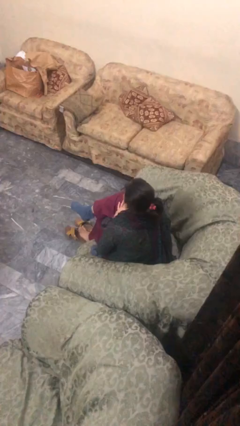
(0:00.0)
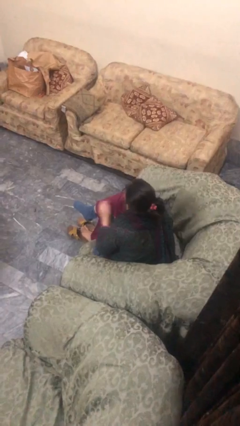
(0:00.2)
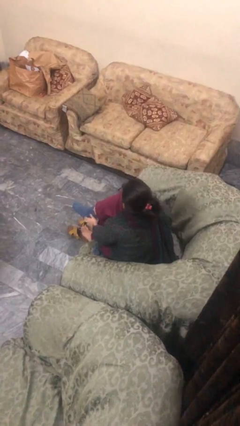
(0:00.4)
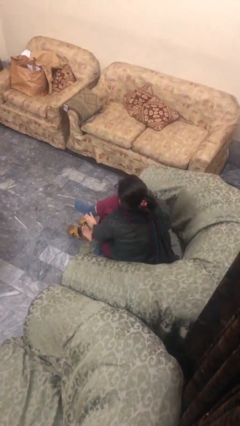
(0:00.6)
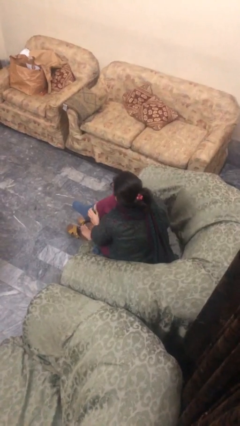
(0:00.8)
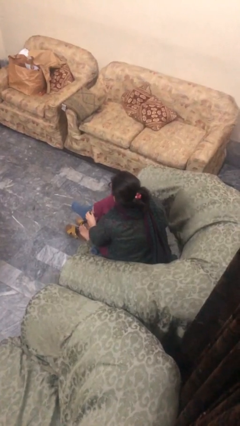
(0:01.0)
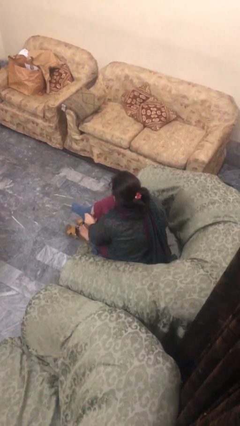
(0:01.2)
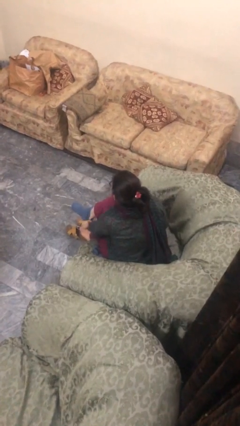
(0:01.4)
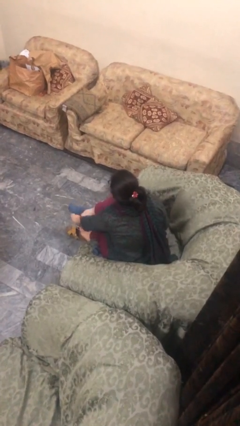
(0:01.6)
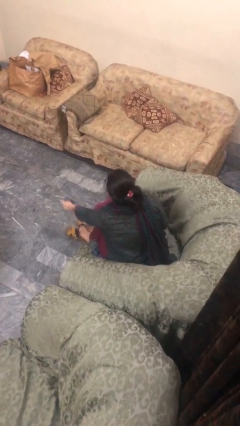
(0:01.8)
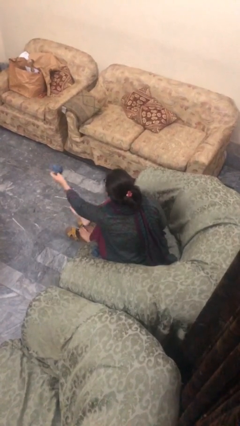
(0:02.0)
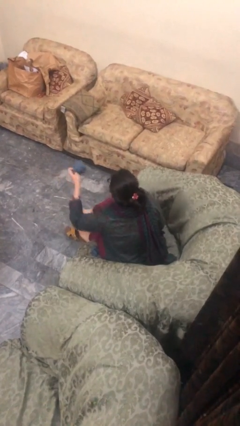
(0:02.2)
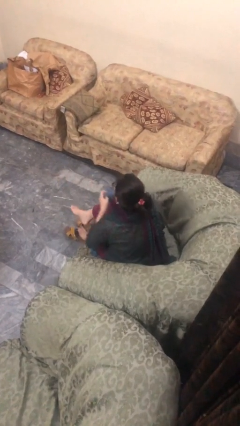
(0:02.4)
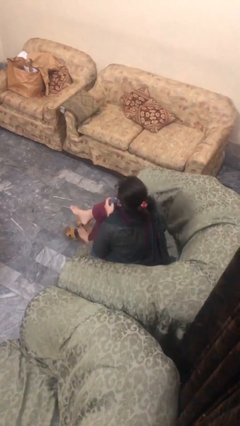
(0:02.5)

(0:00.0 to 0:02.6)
person takes off socks

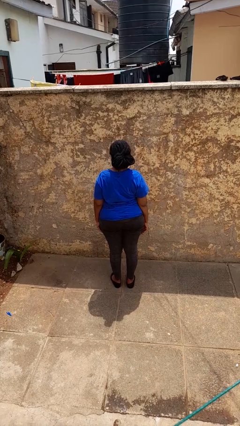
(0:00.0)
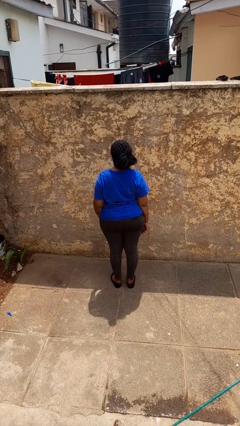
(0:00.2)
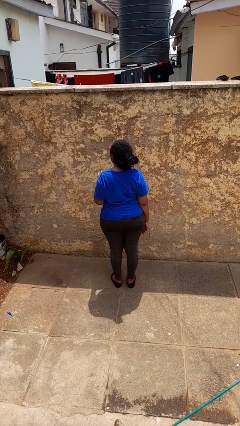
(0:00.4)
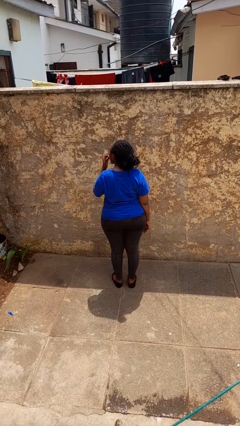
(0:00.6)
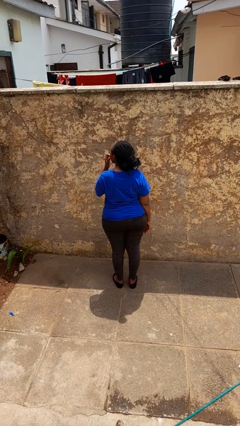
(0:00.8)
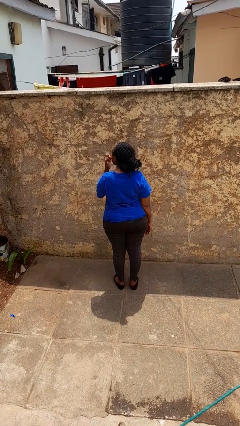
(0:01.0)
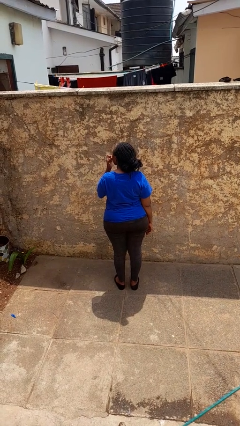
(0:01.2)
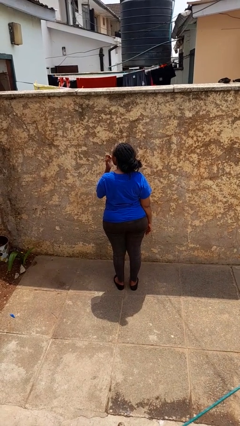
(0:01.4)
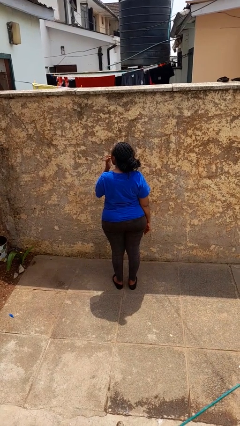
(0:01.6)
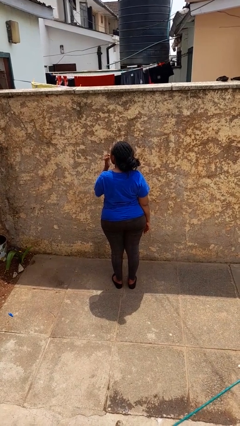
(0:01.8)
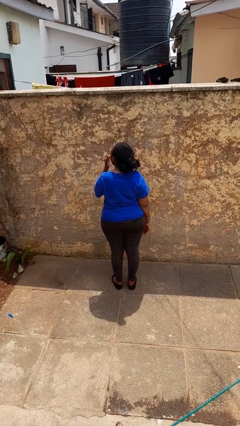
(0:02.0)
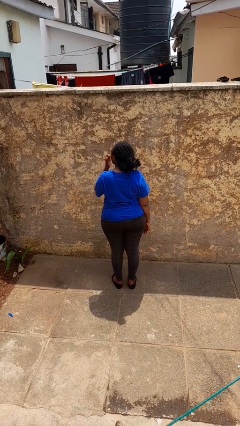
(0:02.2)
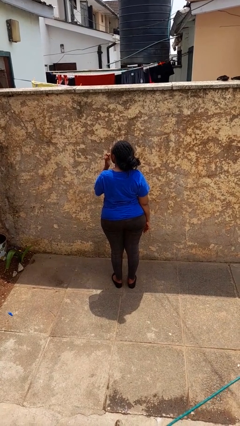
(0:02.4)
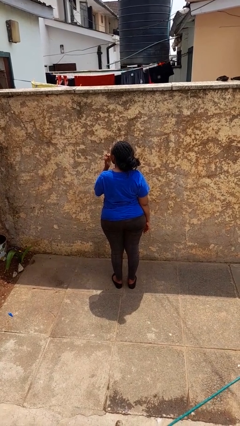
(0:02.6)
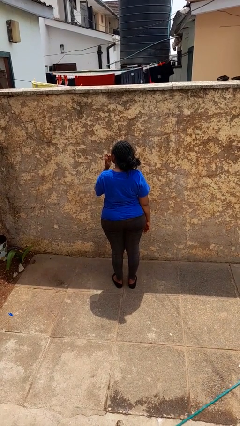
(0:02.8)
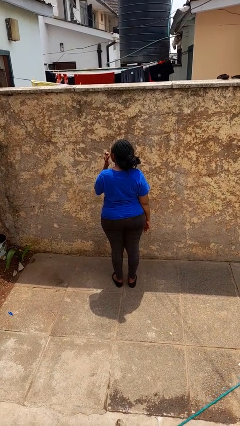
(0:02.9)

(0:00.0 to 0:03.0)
person licks fingers

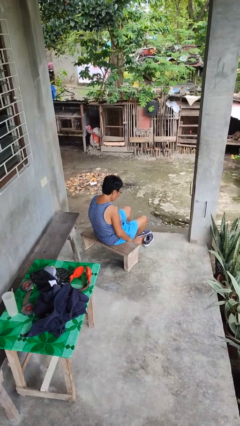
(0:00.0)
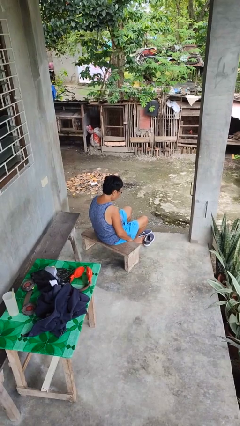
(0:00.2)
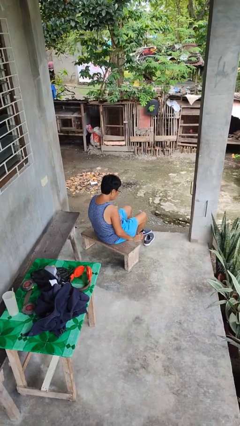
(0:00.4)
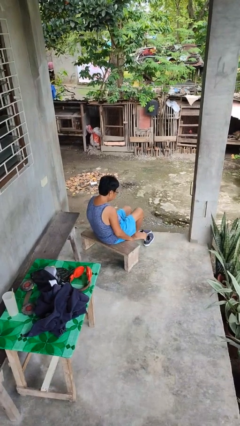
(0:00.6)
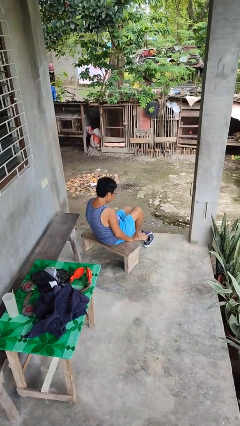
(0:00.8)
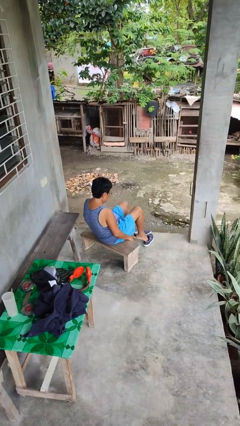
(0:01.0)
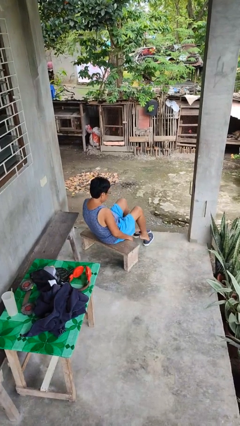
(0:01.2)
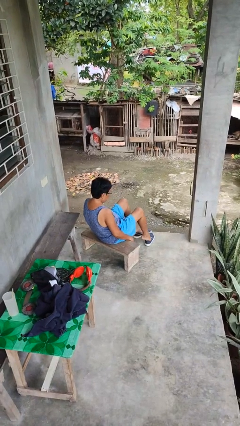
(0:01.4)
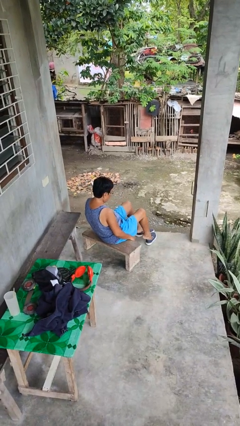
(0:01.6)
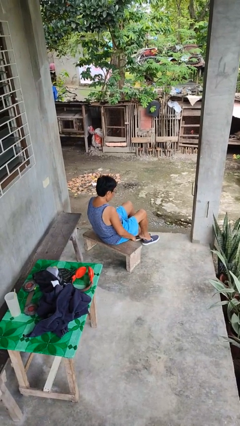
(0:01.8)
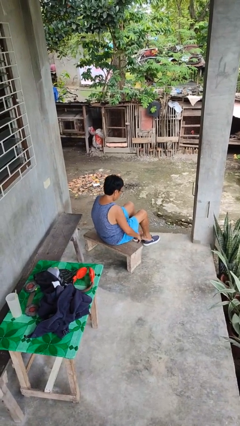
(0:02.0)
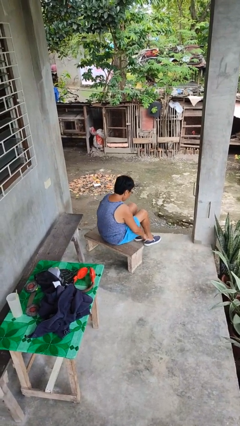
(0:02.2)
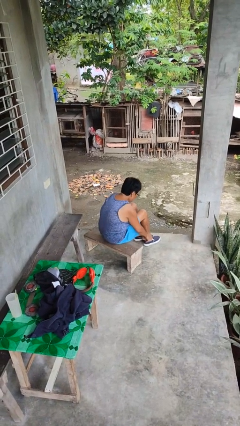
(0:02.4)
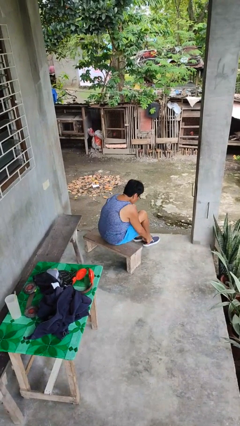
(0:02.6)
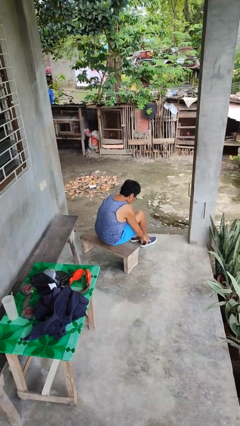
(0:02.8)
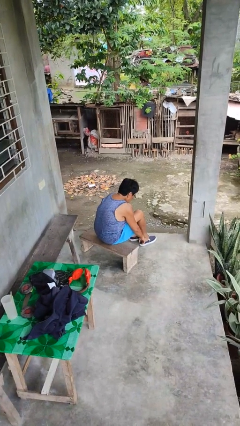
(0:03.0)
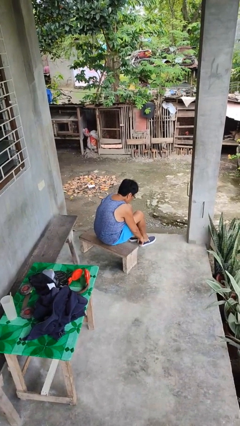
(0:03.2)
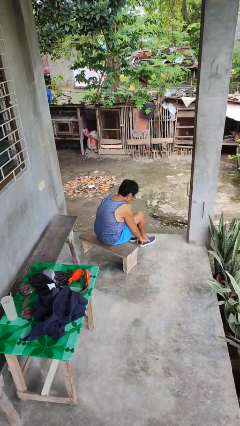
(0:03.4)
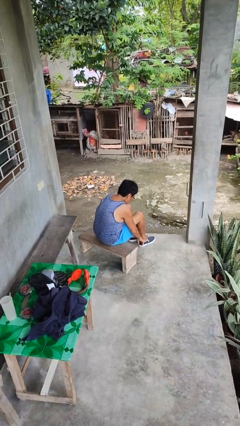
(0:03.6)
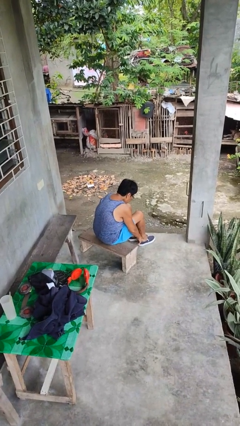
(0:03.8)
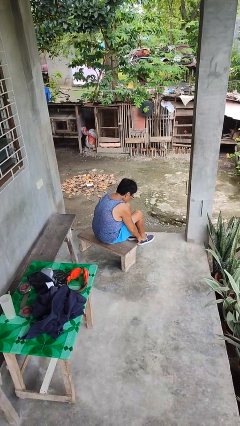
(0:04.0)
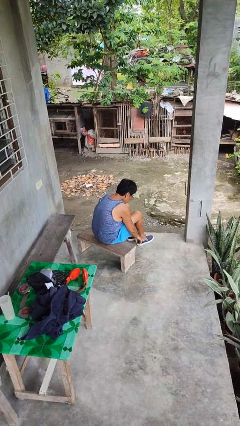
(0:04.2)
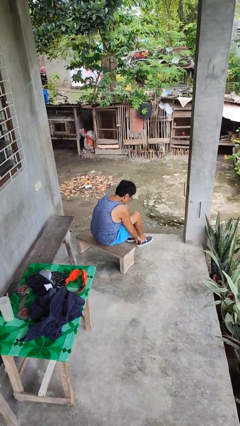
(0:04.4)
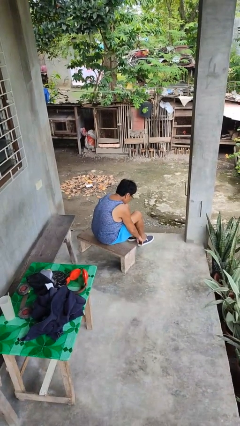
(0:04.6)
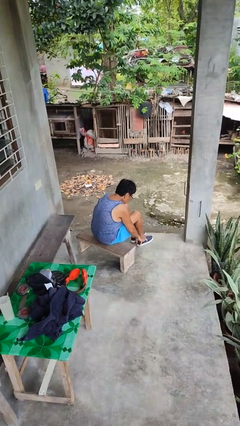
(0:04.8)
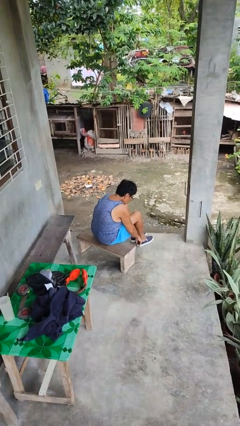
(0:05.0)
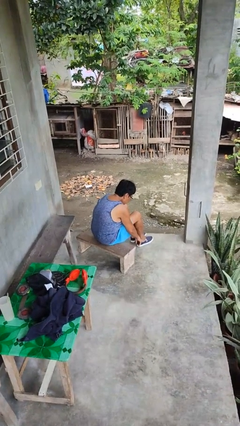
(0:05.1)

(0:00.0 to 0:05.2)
person puts on shoes

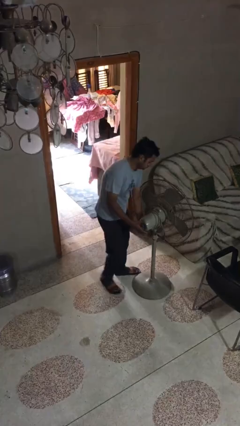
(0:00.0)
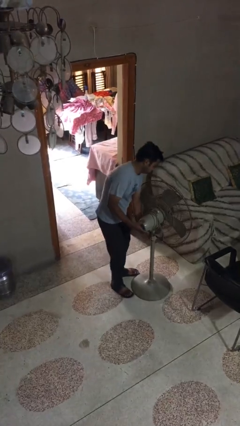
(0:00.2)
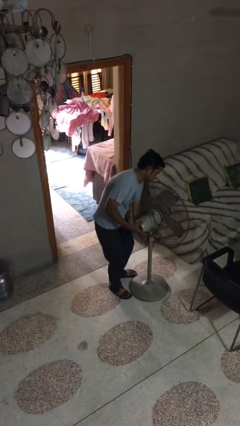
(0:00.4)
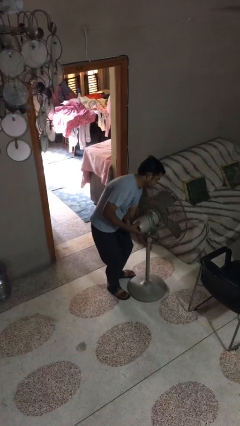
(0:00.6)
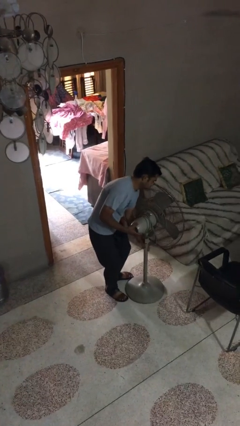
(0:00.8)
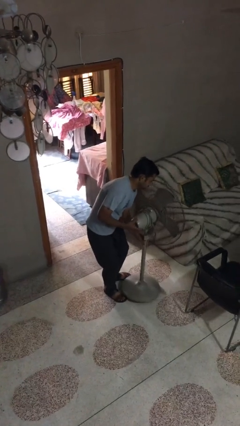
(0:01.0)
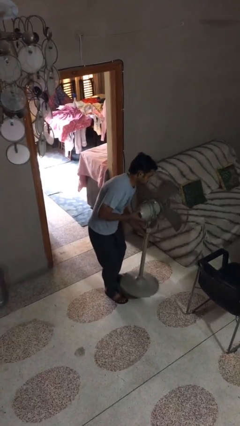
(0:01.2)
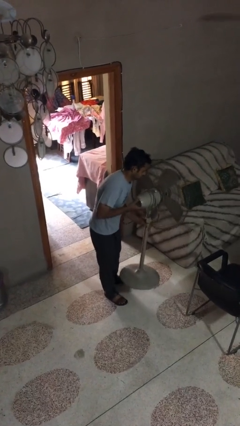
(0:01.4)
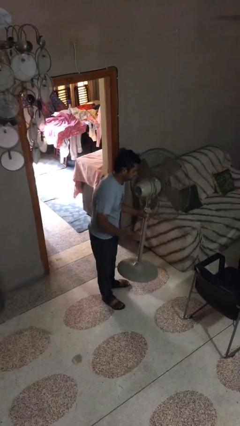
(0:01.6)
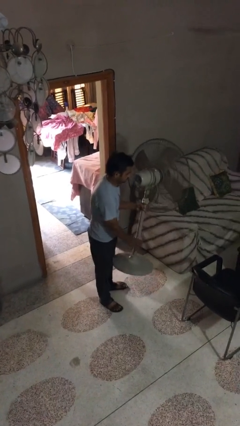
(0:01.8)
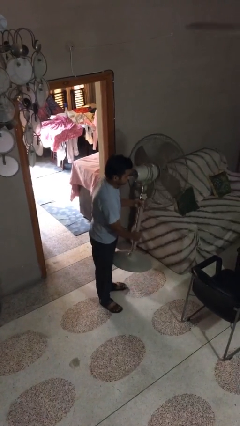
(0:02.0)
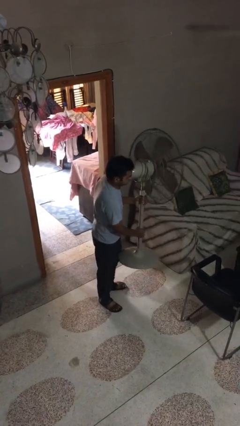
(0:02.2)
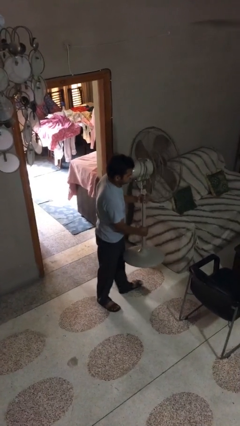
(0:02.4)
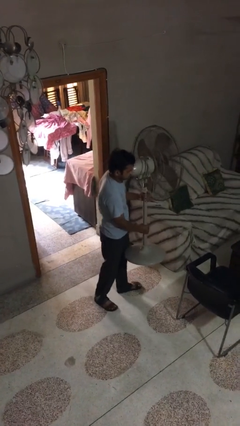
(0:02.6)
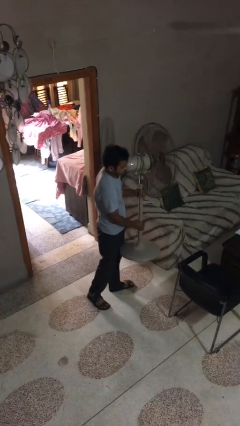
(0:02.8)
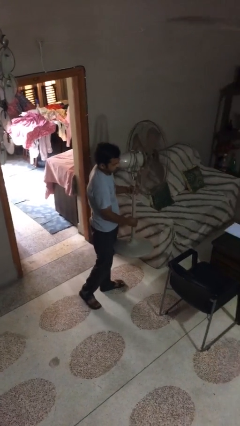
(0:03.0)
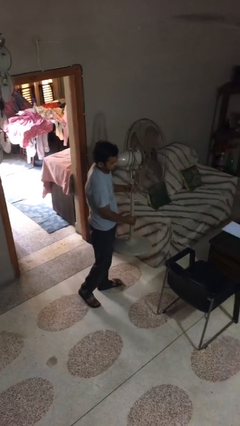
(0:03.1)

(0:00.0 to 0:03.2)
person picks up object from floor

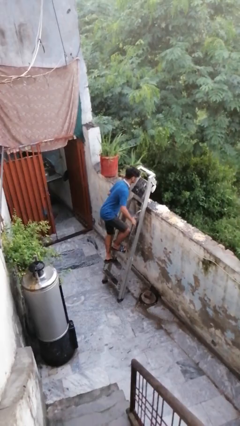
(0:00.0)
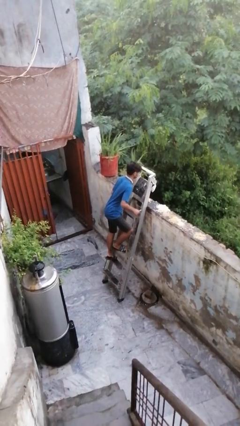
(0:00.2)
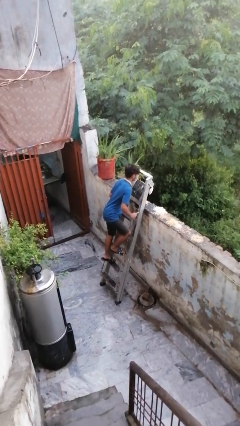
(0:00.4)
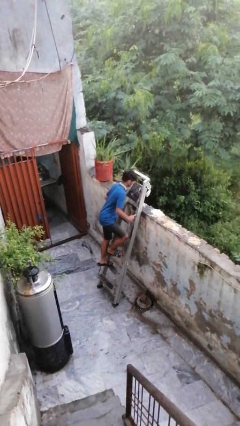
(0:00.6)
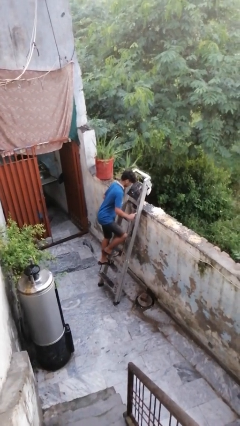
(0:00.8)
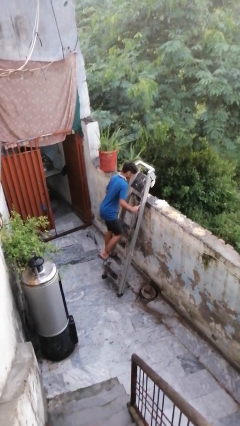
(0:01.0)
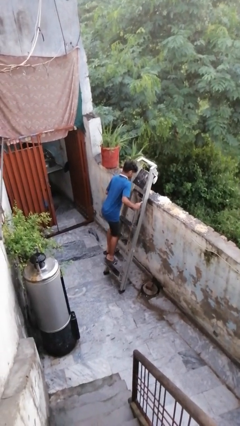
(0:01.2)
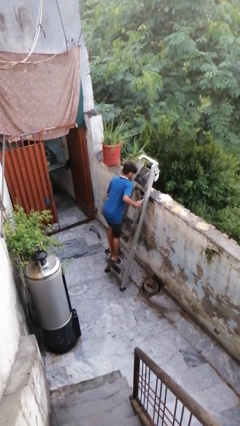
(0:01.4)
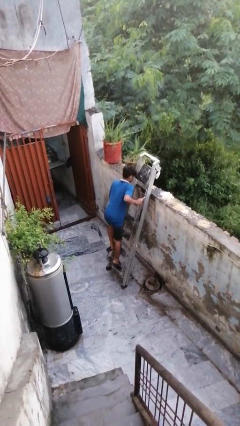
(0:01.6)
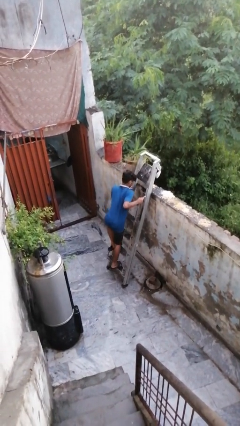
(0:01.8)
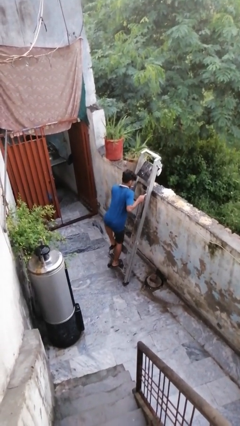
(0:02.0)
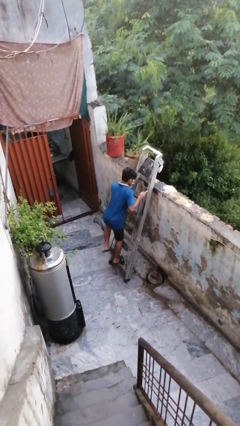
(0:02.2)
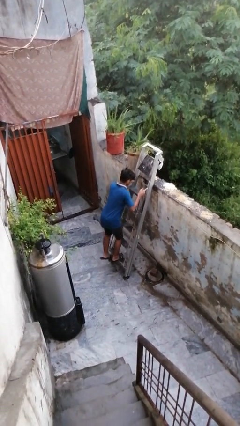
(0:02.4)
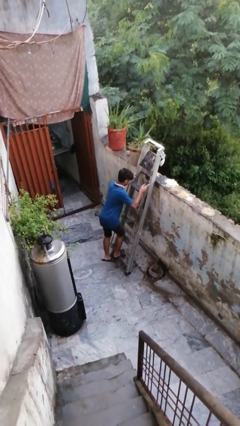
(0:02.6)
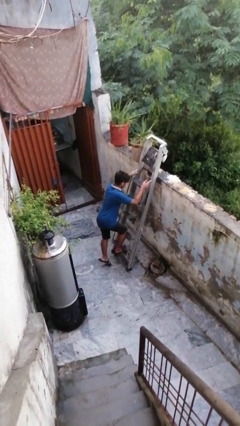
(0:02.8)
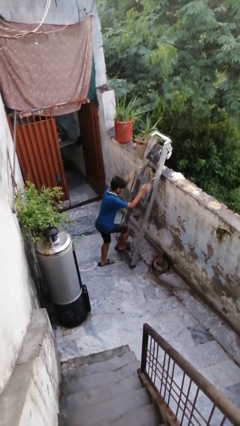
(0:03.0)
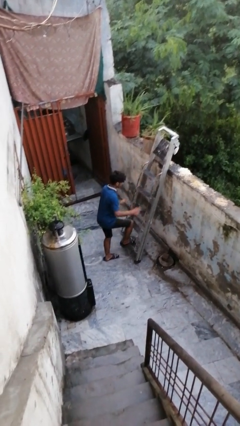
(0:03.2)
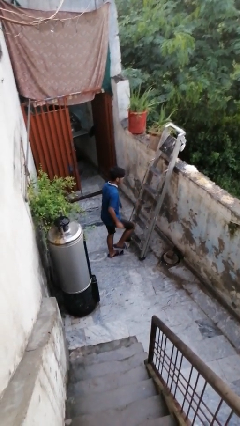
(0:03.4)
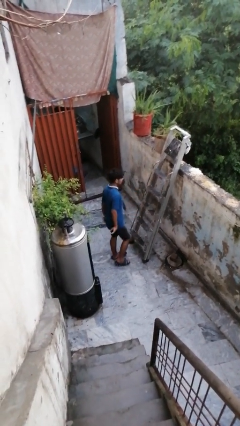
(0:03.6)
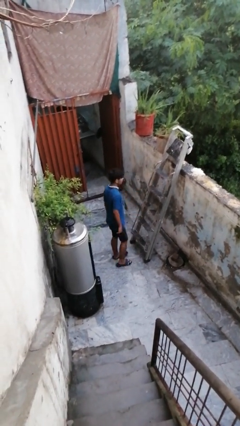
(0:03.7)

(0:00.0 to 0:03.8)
person climbs down ladder
